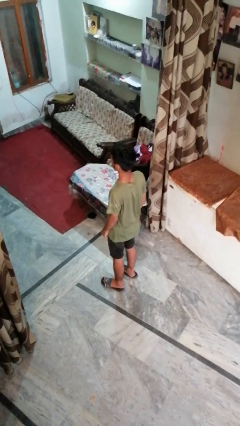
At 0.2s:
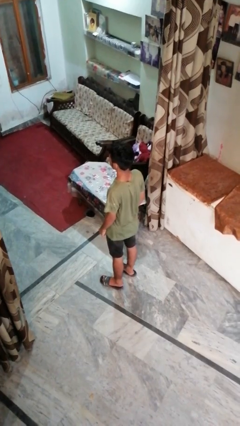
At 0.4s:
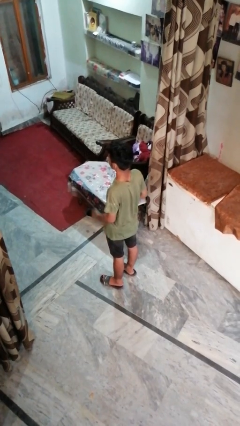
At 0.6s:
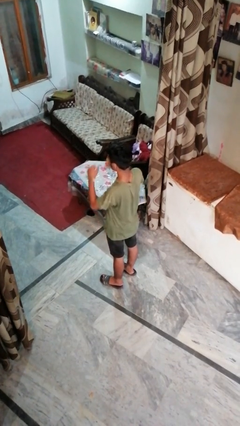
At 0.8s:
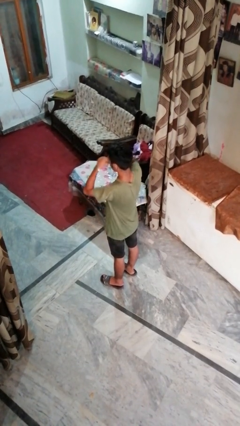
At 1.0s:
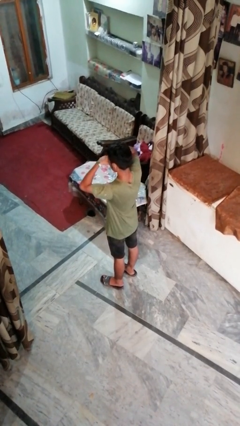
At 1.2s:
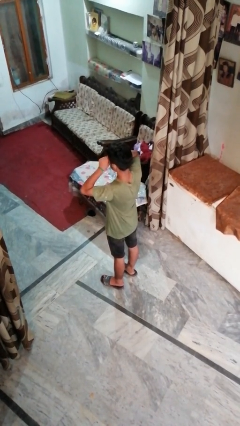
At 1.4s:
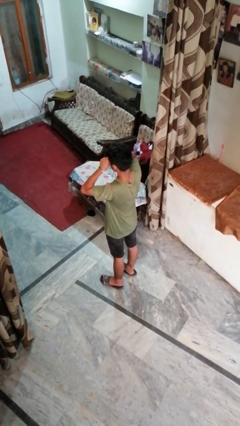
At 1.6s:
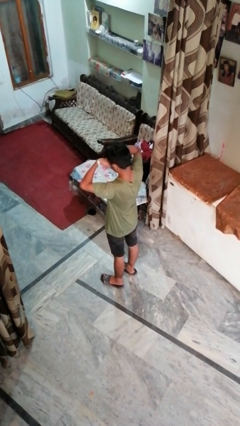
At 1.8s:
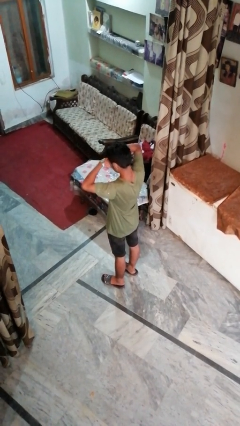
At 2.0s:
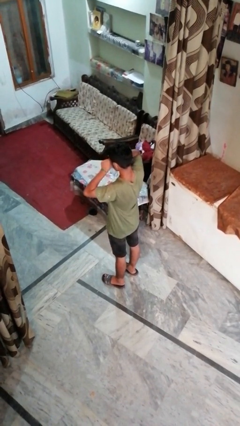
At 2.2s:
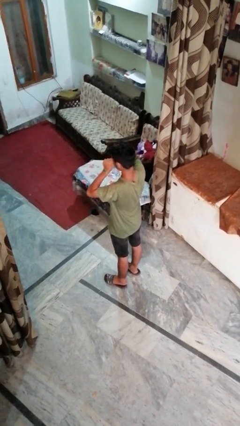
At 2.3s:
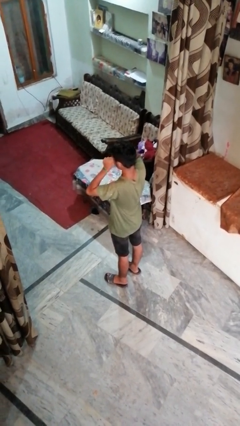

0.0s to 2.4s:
person rubs eyes

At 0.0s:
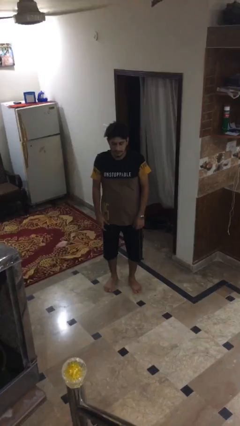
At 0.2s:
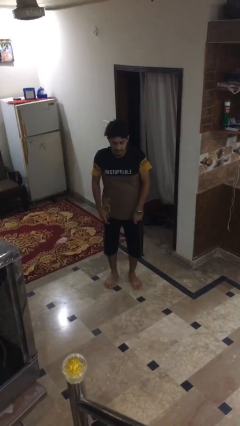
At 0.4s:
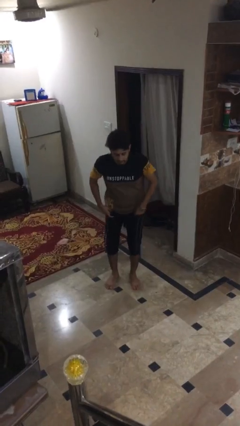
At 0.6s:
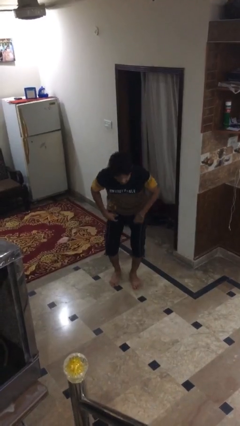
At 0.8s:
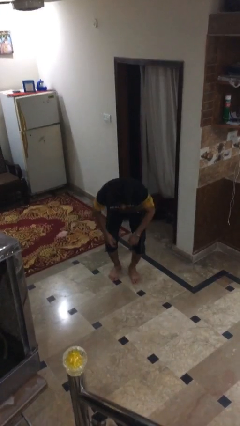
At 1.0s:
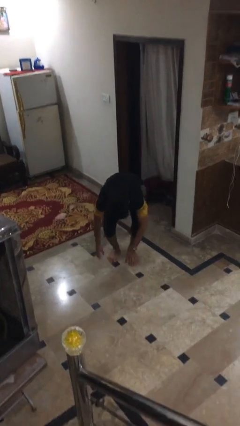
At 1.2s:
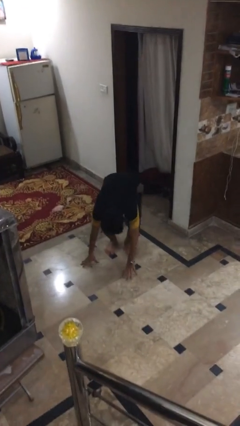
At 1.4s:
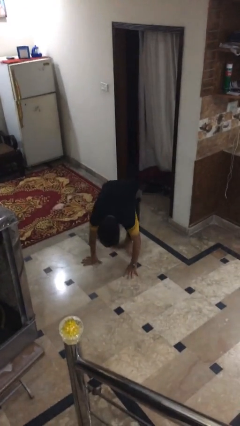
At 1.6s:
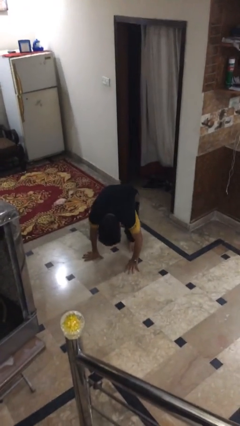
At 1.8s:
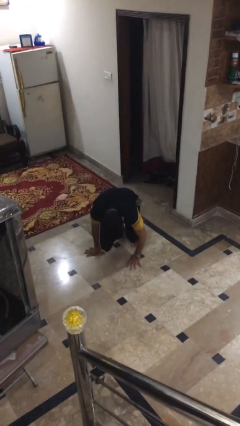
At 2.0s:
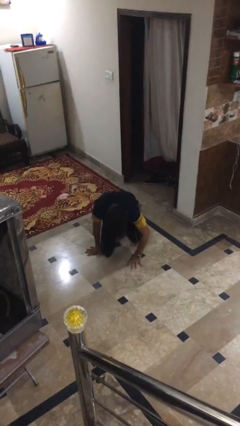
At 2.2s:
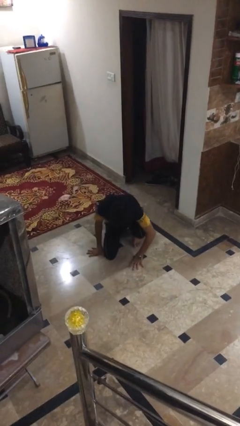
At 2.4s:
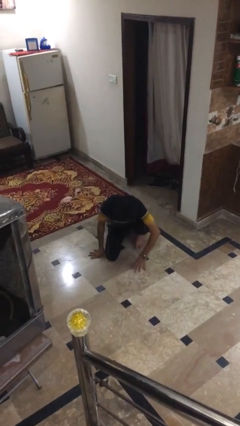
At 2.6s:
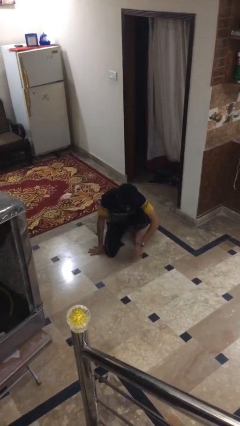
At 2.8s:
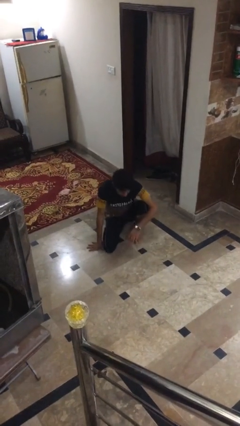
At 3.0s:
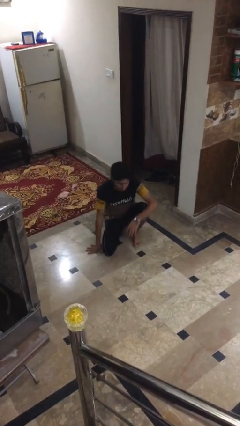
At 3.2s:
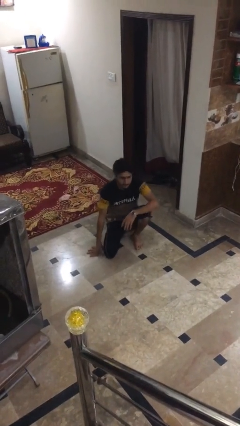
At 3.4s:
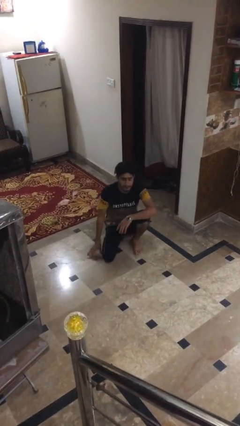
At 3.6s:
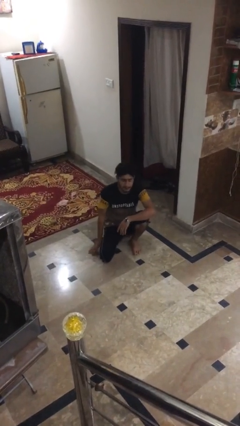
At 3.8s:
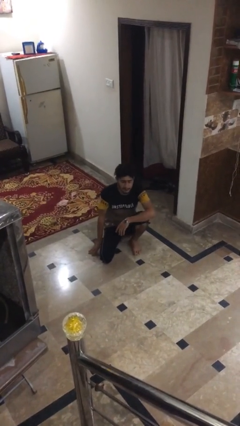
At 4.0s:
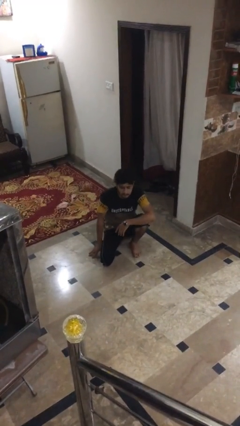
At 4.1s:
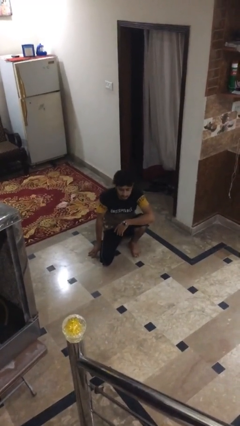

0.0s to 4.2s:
person sits crisscross

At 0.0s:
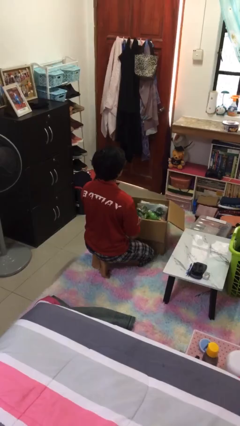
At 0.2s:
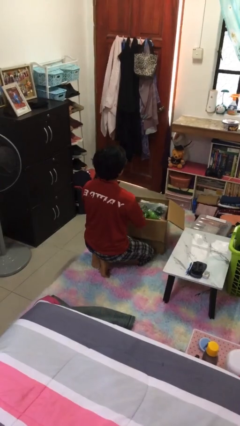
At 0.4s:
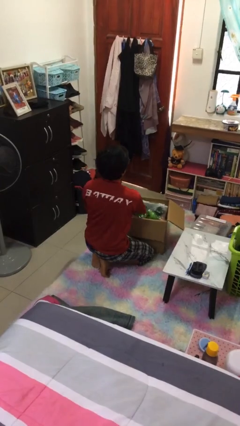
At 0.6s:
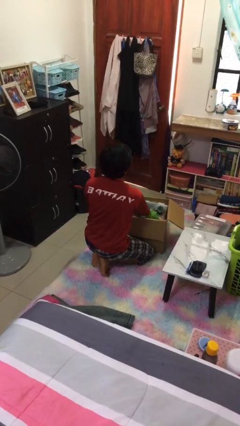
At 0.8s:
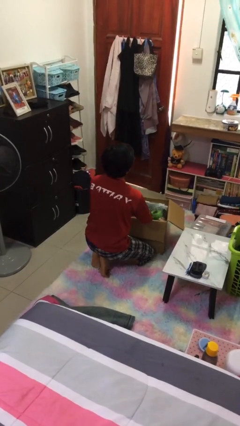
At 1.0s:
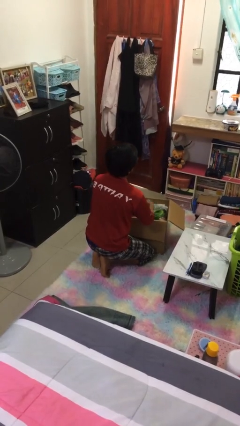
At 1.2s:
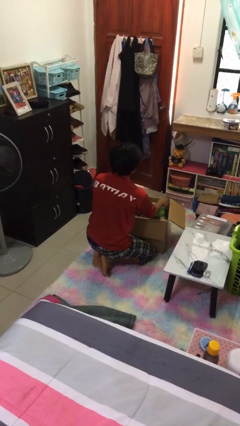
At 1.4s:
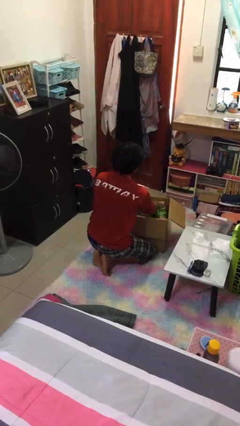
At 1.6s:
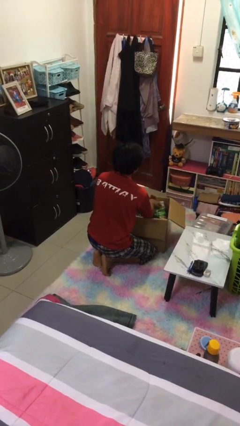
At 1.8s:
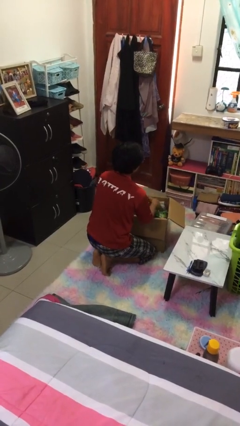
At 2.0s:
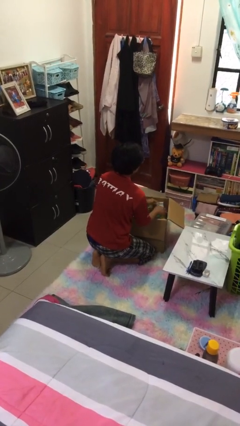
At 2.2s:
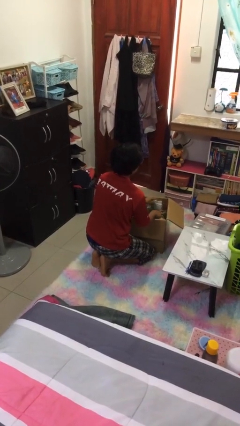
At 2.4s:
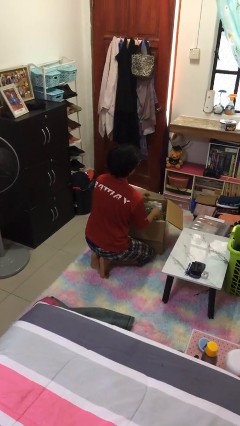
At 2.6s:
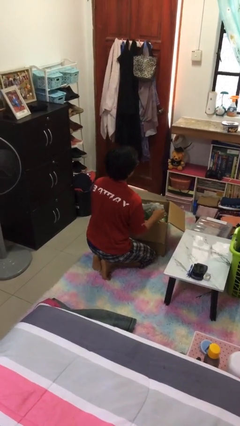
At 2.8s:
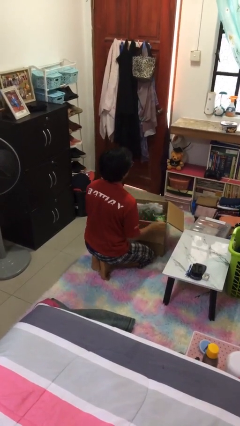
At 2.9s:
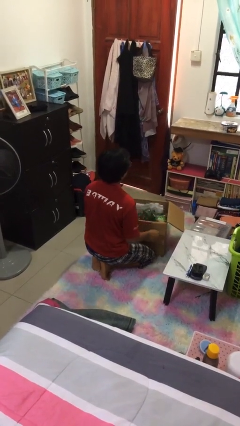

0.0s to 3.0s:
person searches in box

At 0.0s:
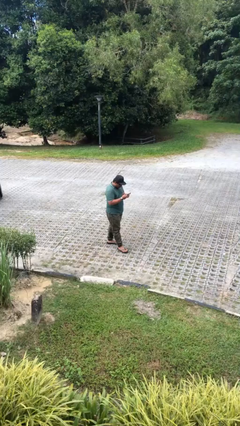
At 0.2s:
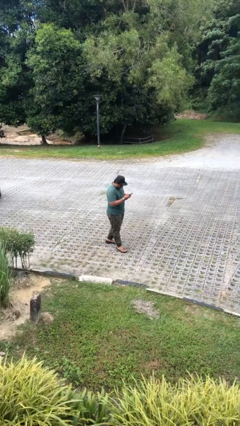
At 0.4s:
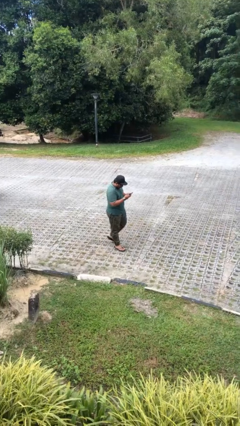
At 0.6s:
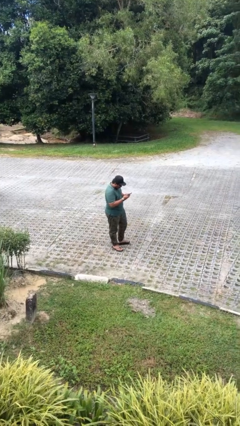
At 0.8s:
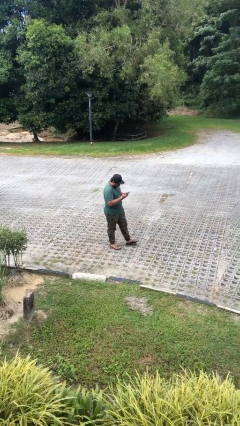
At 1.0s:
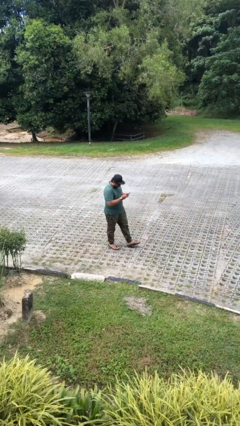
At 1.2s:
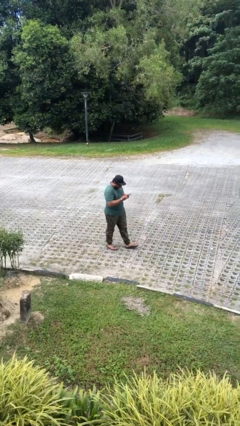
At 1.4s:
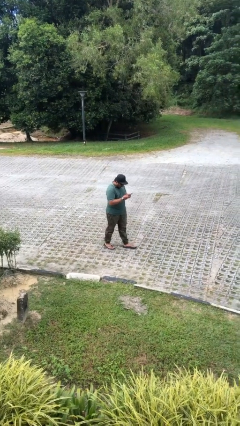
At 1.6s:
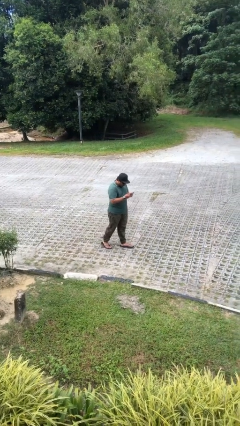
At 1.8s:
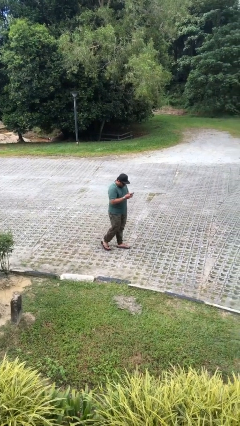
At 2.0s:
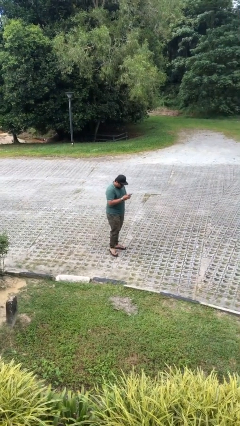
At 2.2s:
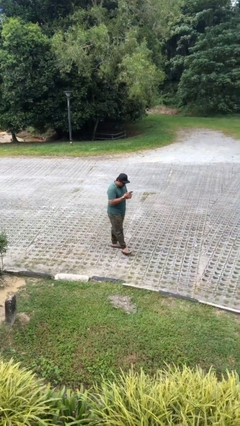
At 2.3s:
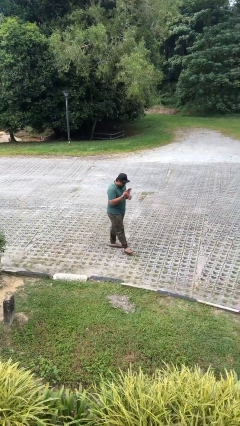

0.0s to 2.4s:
person texts on phone

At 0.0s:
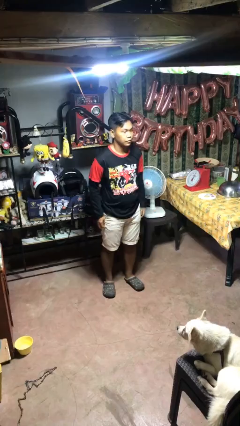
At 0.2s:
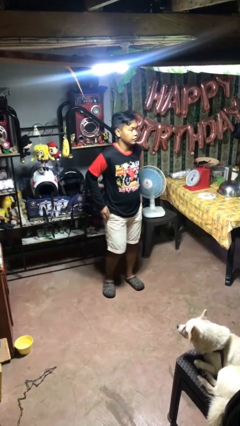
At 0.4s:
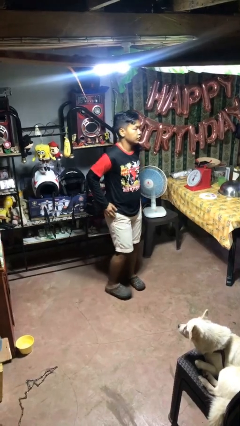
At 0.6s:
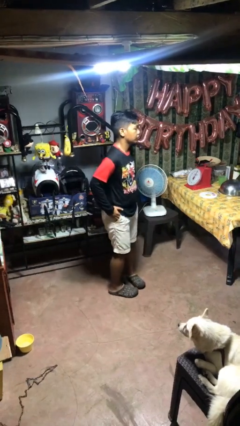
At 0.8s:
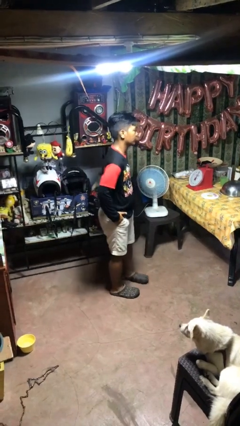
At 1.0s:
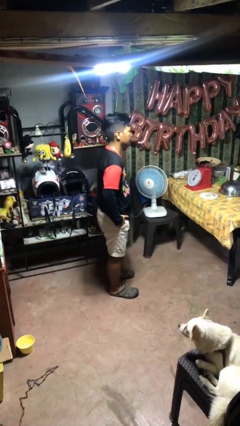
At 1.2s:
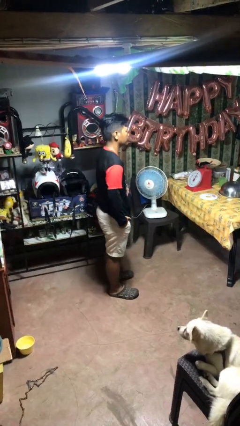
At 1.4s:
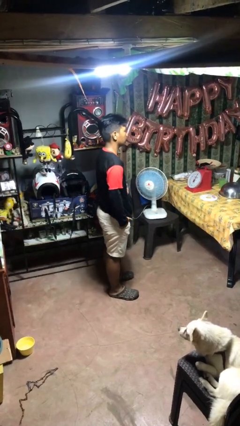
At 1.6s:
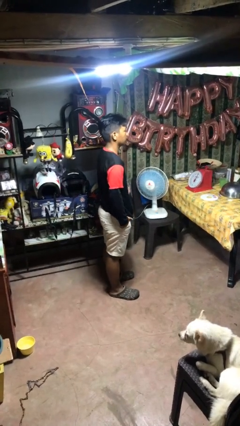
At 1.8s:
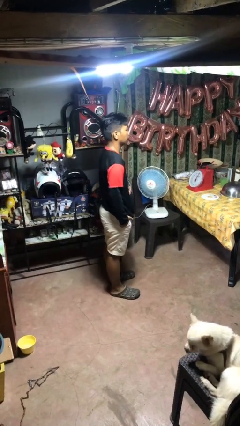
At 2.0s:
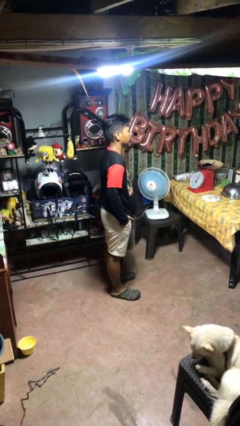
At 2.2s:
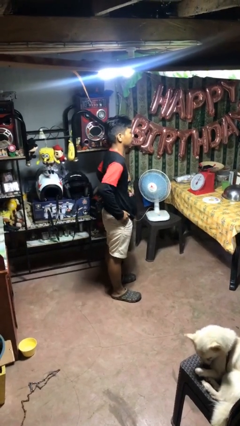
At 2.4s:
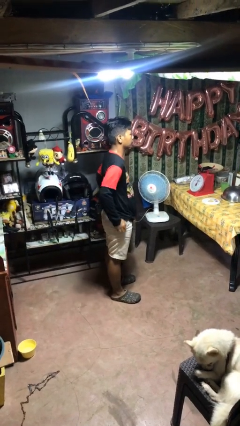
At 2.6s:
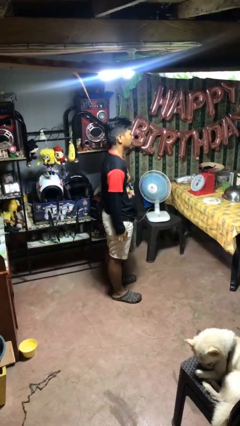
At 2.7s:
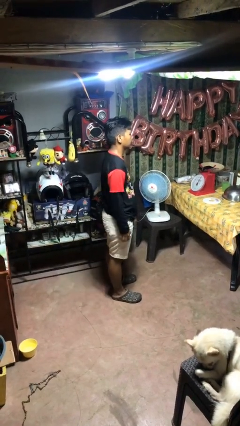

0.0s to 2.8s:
person puts hands in back pockets

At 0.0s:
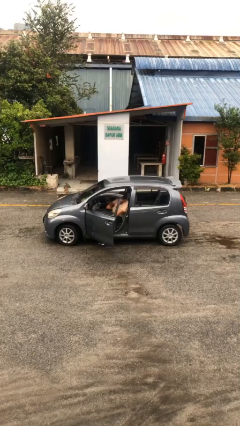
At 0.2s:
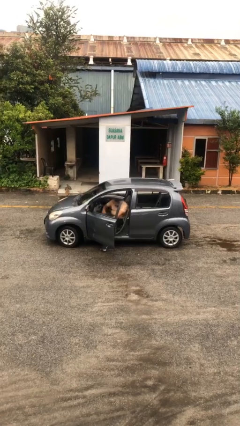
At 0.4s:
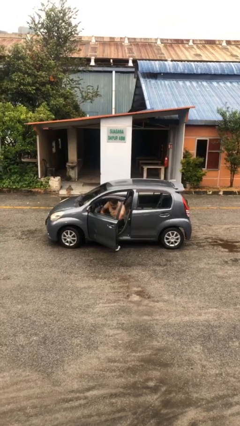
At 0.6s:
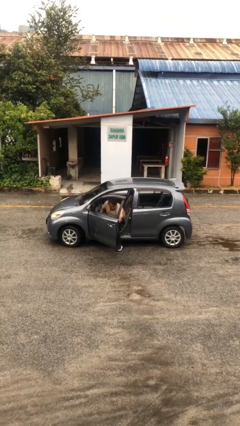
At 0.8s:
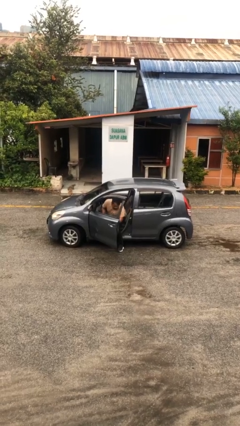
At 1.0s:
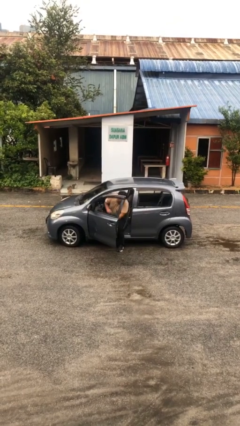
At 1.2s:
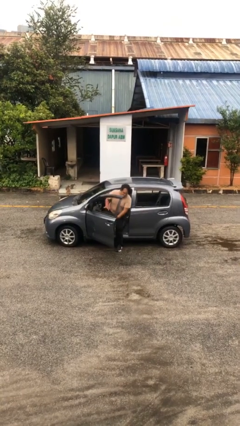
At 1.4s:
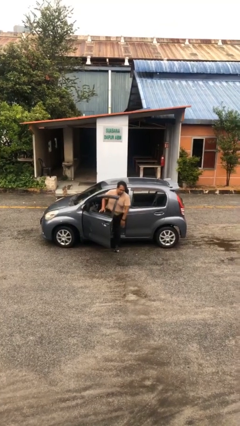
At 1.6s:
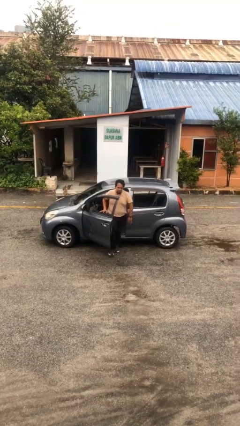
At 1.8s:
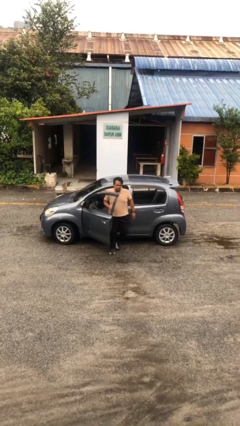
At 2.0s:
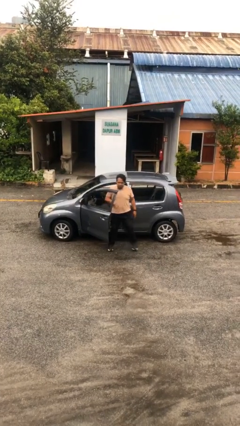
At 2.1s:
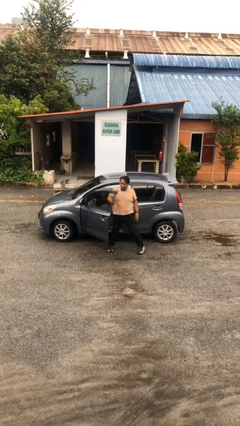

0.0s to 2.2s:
person exits car

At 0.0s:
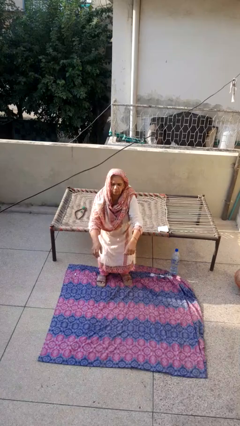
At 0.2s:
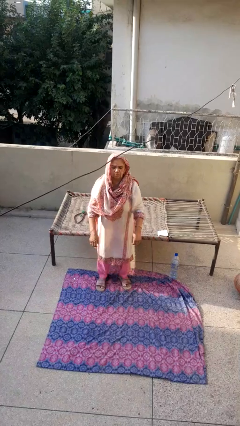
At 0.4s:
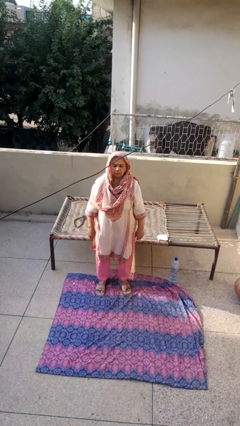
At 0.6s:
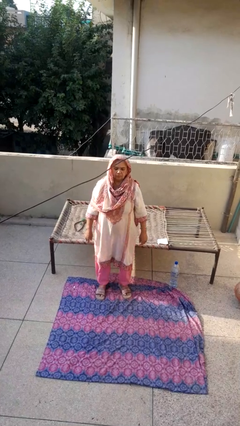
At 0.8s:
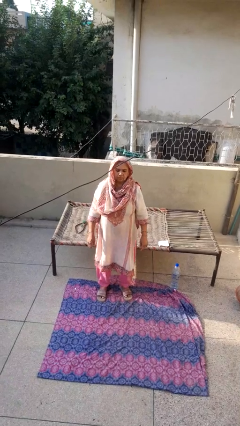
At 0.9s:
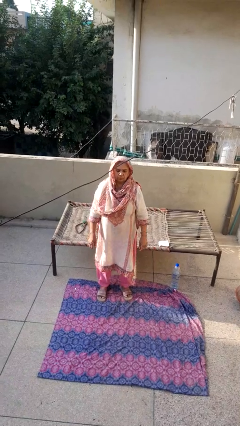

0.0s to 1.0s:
person stands up
